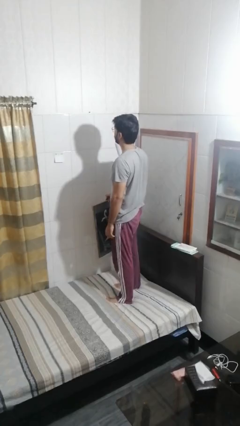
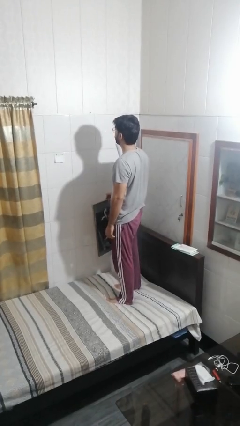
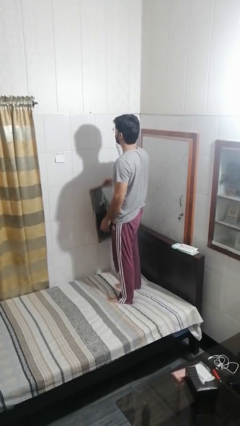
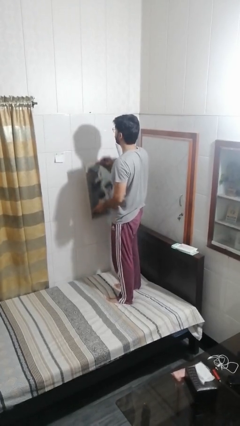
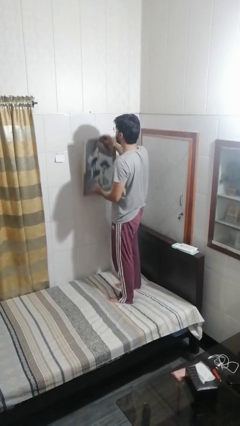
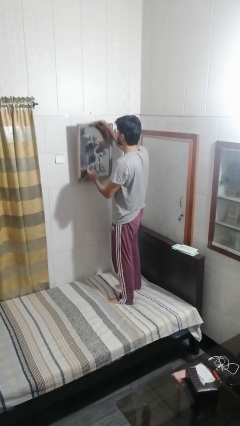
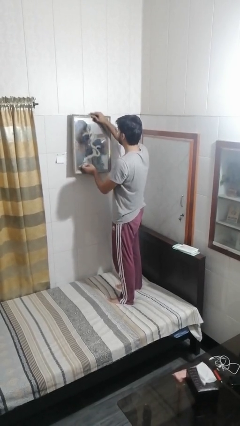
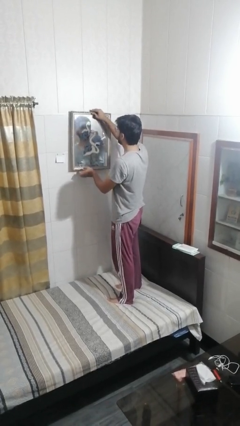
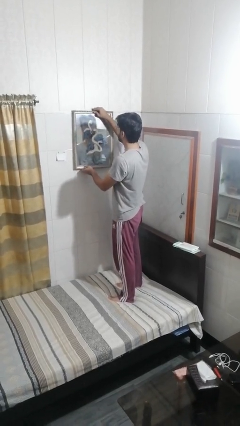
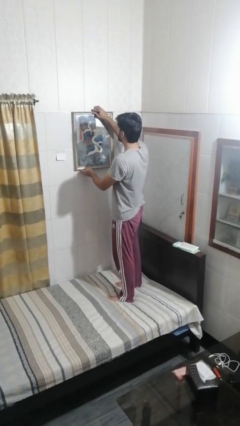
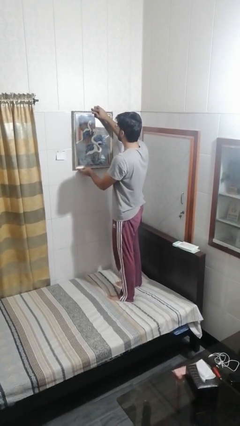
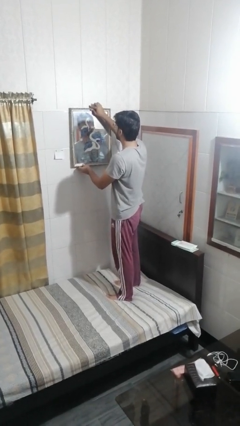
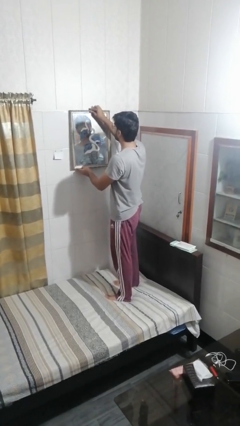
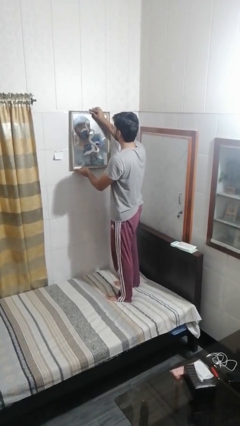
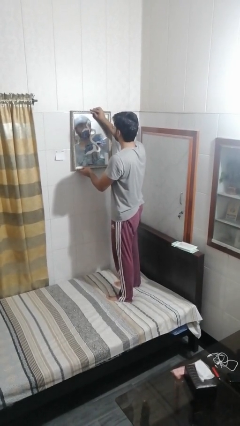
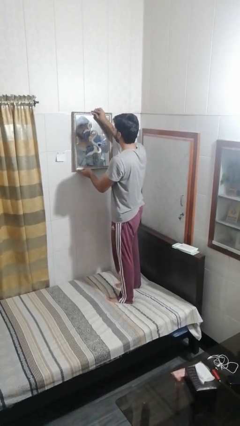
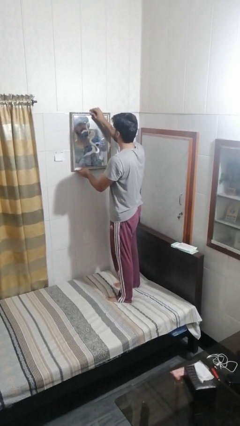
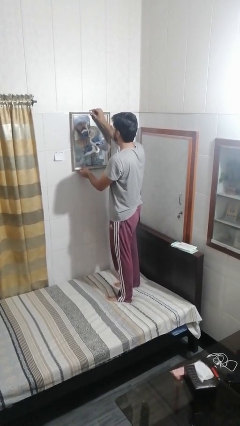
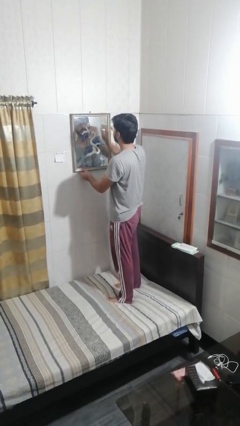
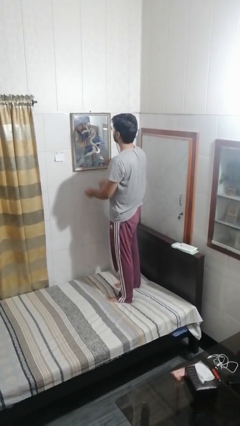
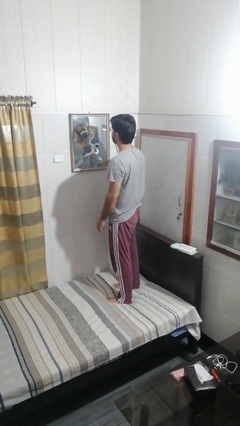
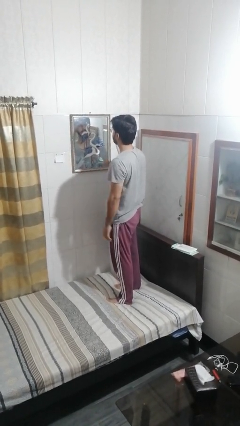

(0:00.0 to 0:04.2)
person puts up picture frame

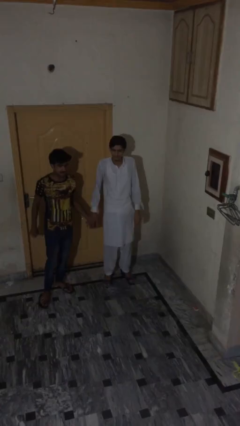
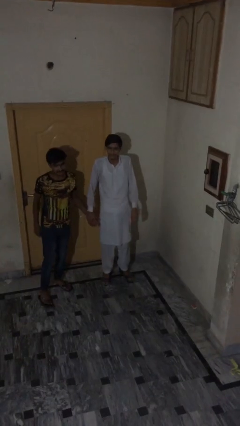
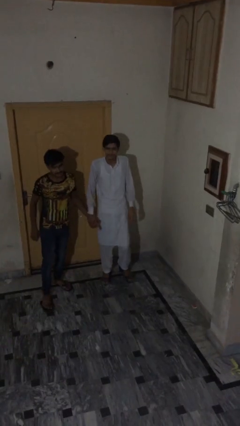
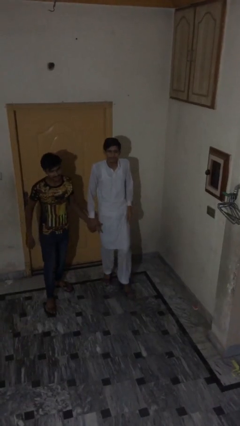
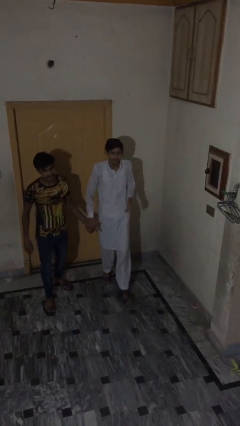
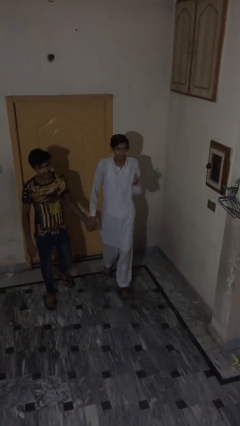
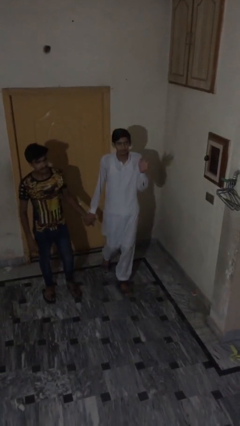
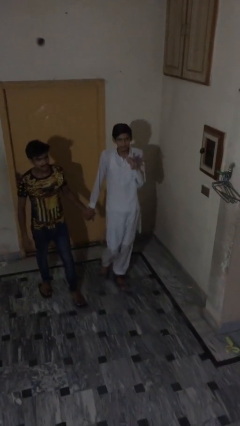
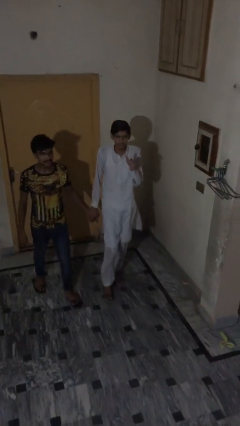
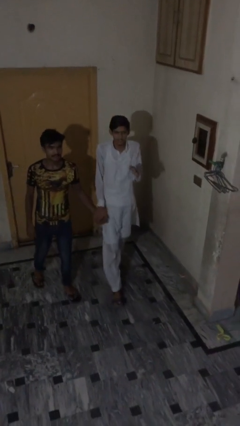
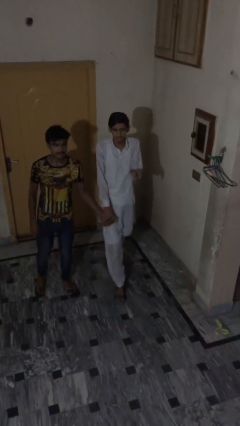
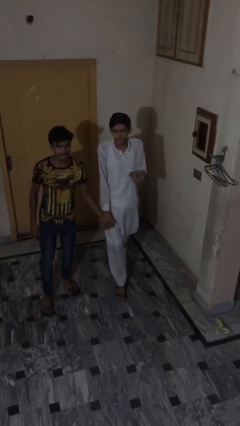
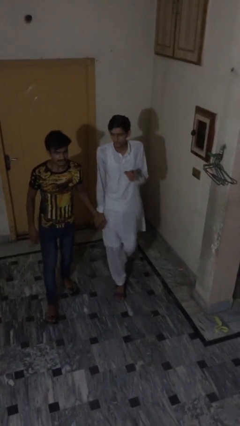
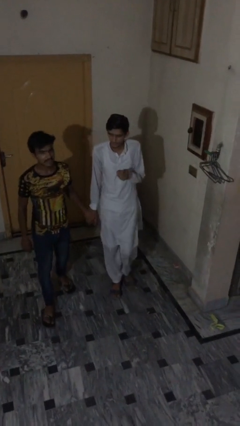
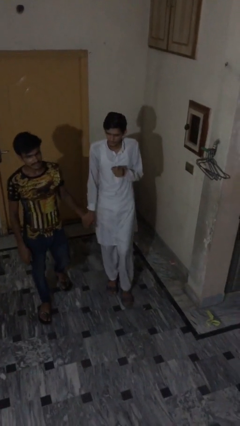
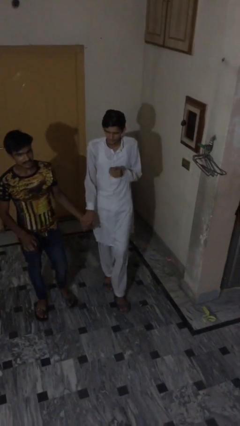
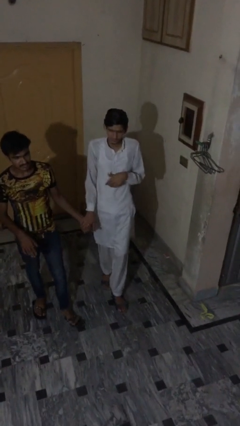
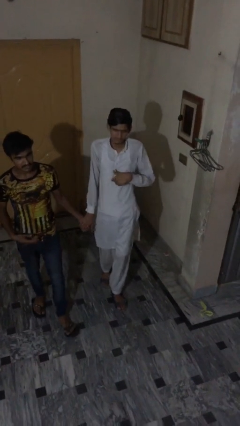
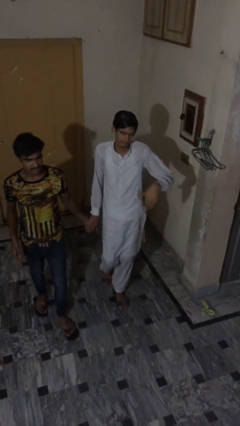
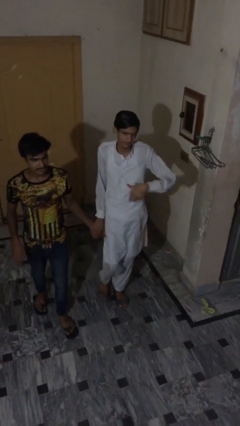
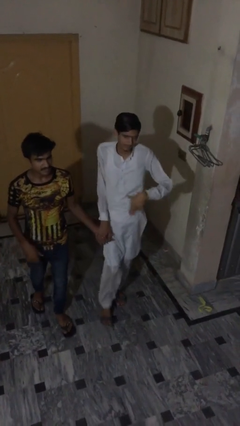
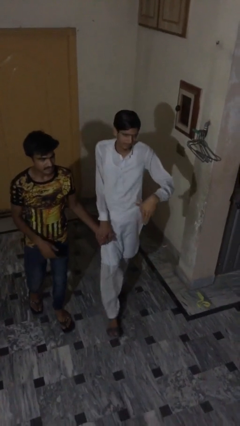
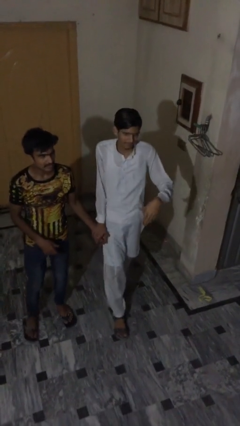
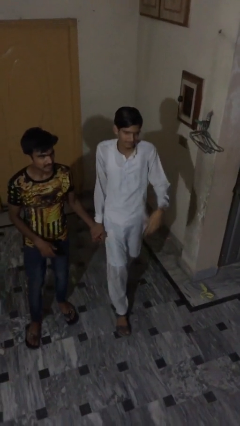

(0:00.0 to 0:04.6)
person holds hand

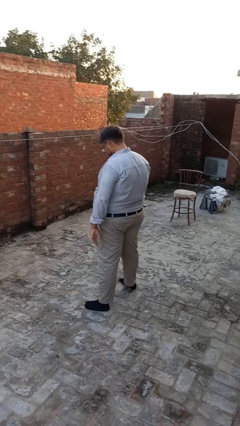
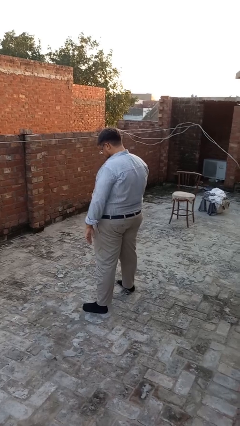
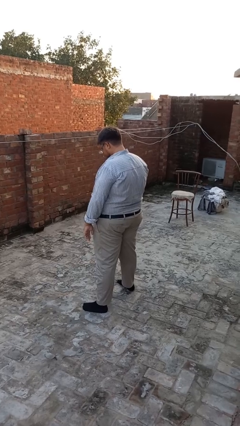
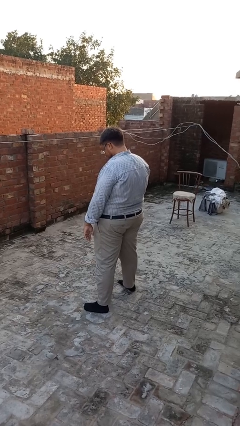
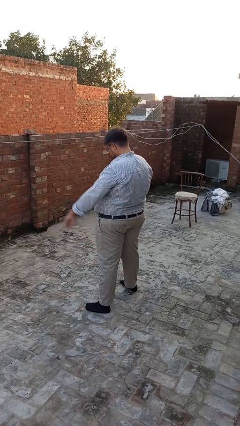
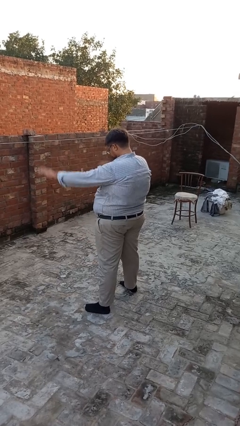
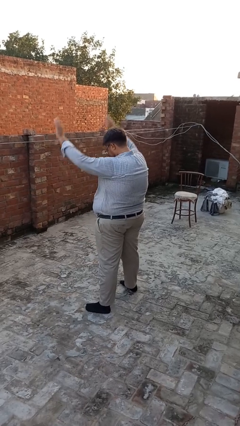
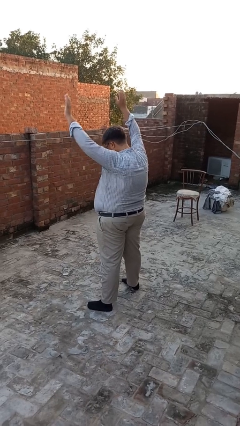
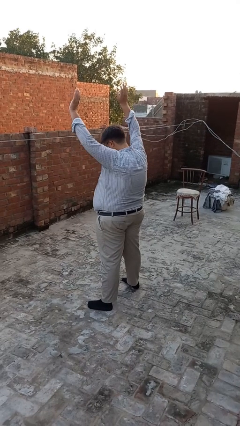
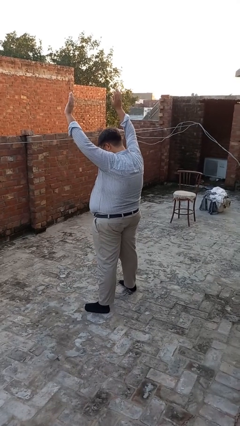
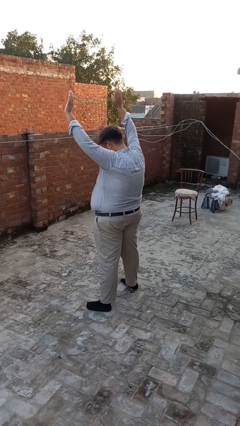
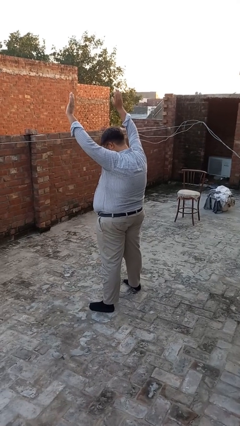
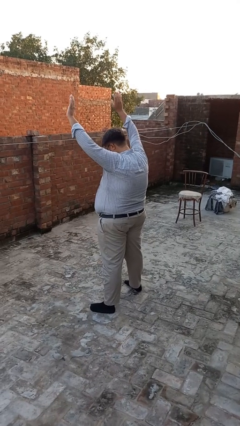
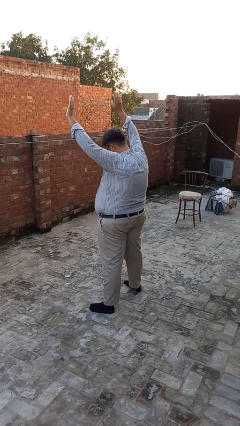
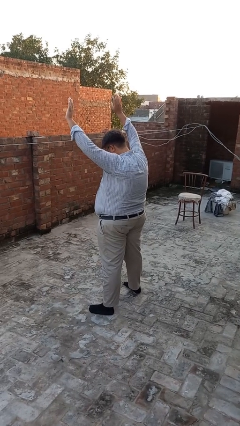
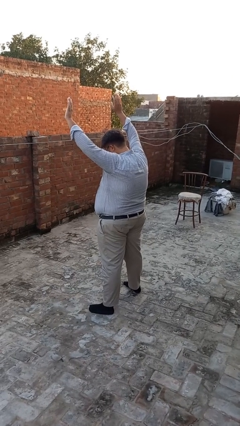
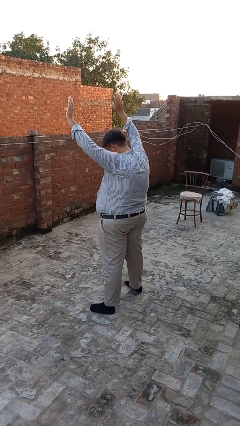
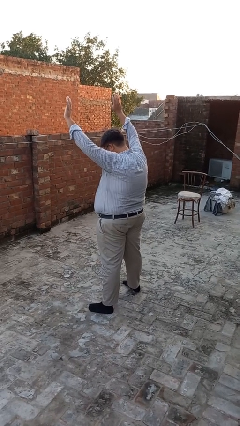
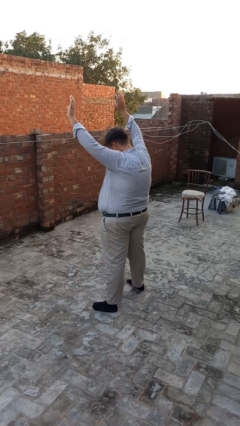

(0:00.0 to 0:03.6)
person gestures swipe up

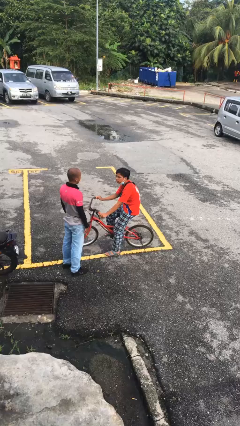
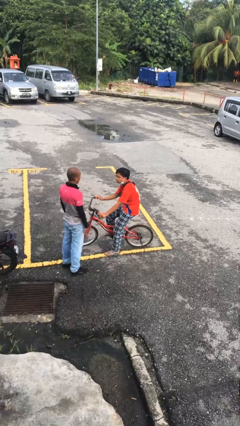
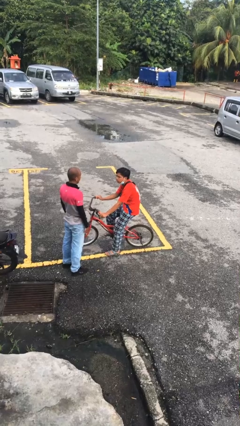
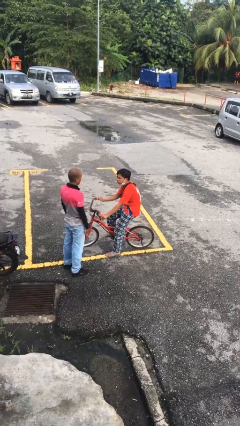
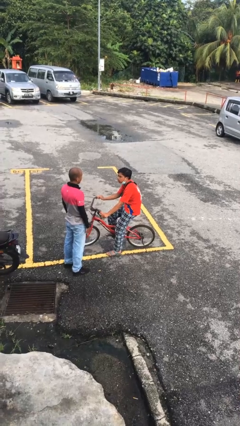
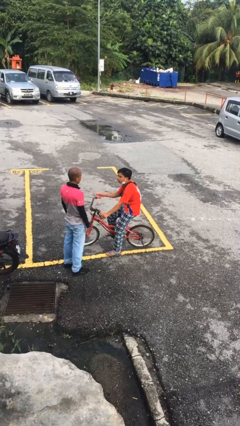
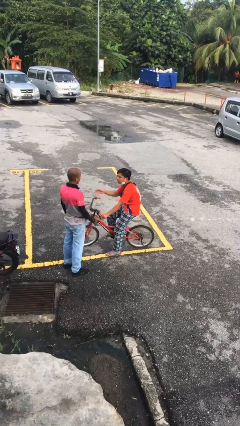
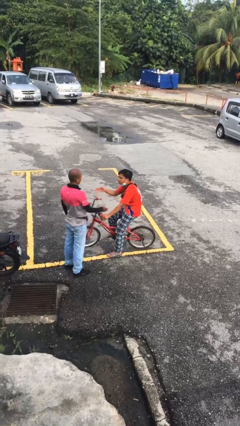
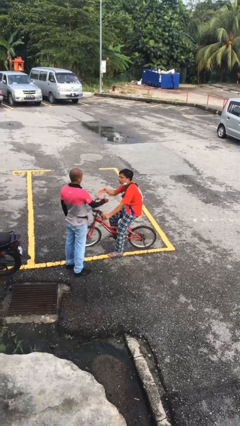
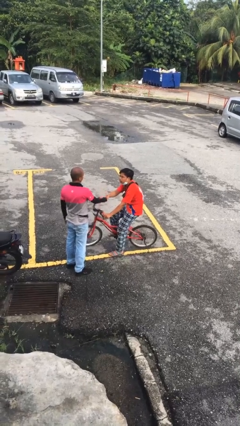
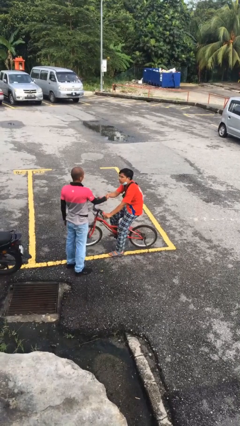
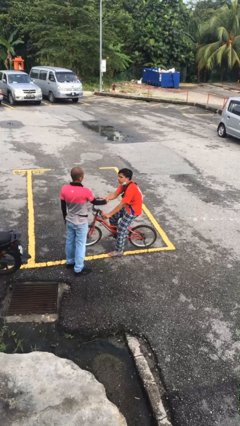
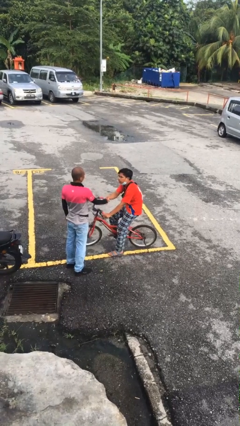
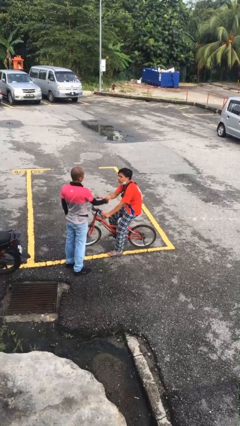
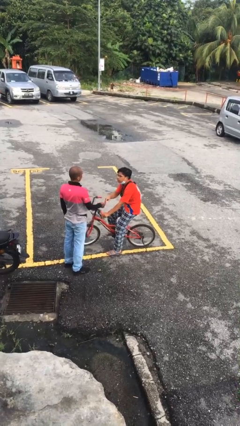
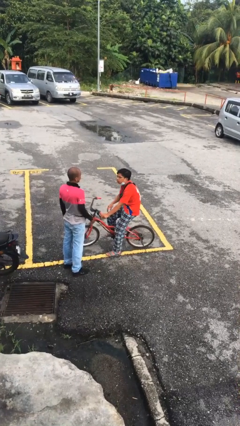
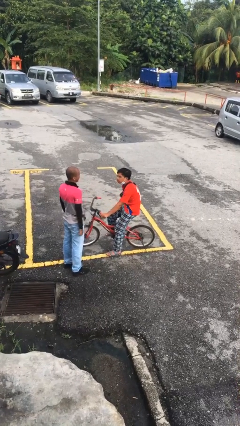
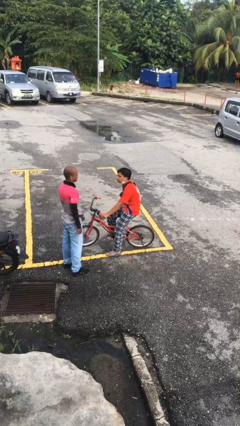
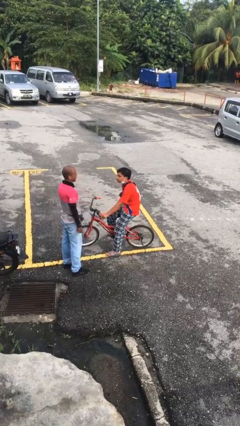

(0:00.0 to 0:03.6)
person shakes hand

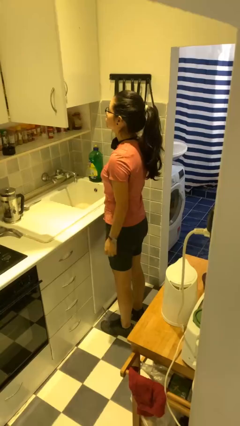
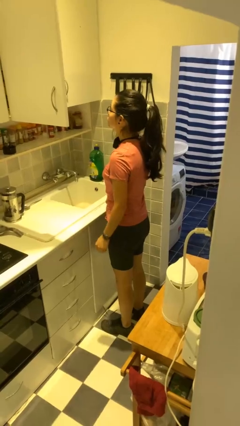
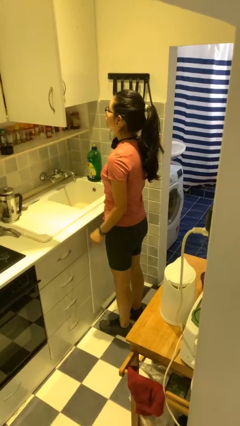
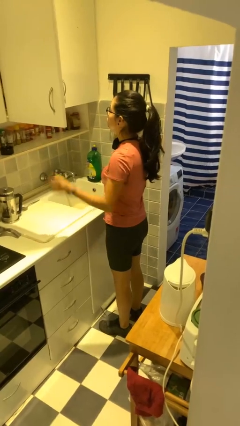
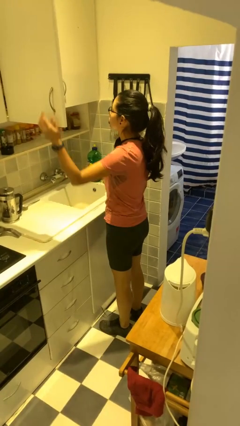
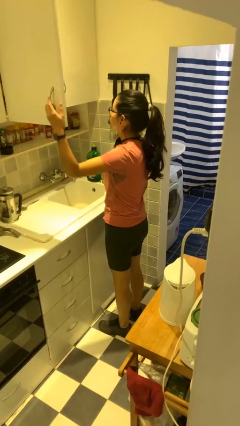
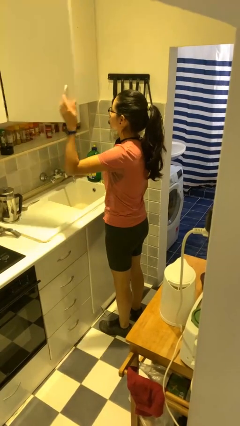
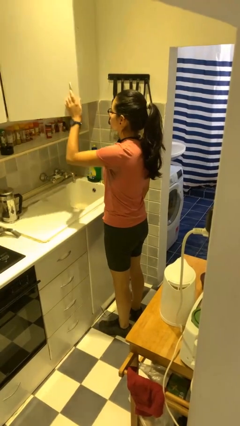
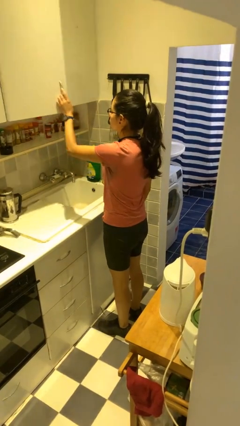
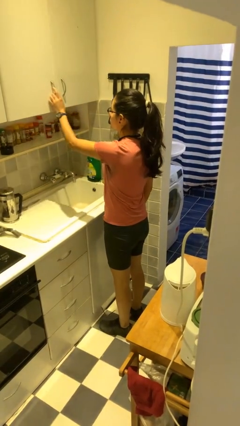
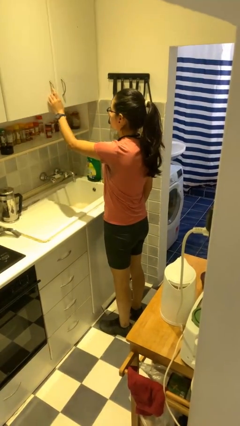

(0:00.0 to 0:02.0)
person closes cabinet
